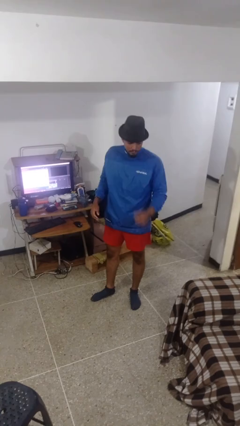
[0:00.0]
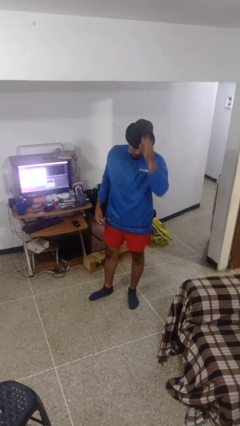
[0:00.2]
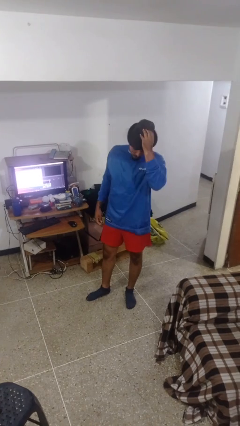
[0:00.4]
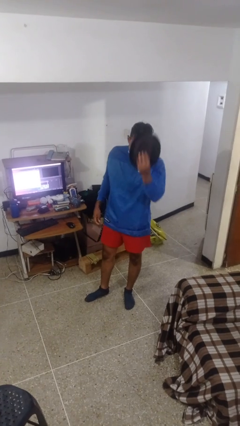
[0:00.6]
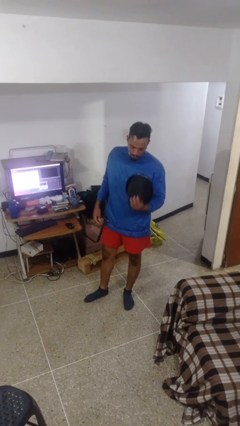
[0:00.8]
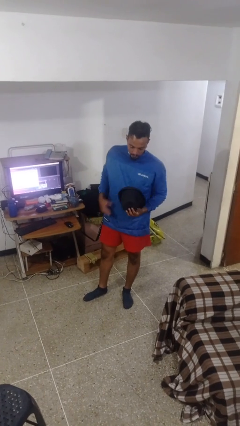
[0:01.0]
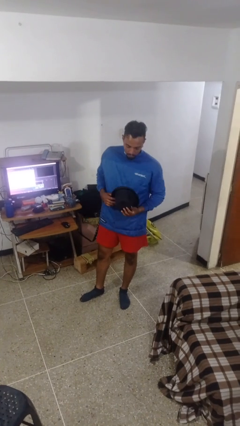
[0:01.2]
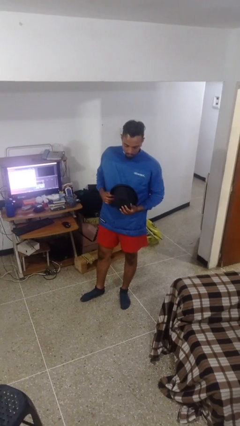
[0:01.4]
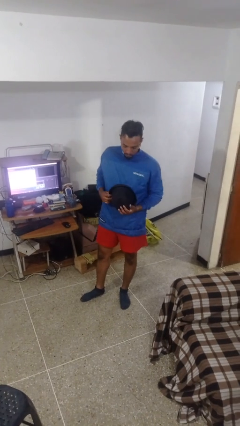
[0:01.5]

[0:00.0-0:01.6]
person takes off hat

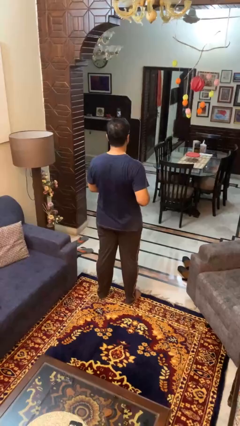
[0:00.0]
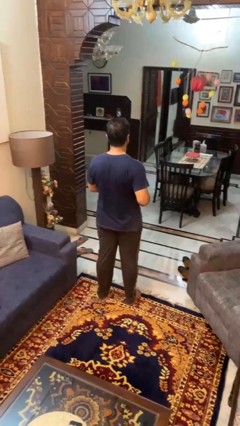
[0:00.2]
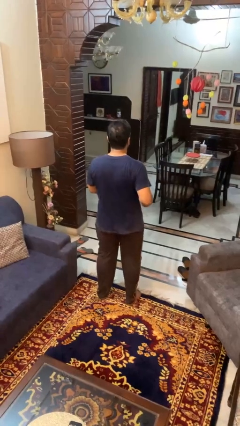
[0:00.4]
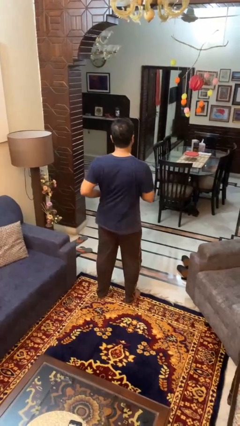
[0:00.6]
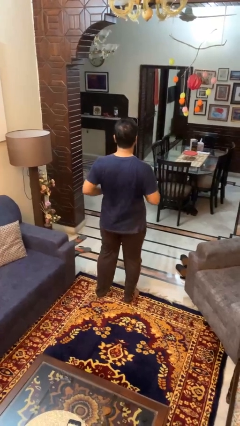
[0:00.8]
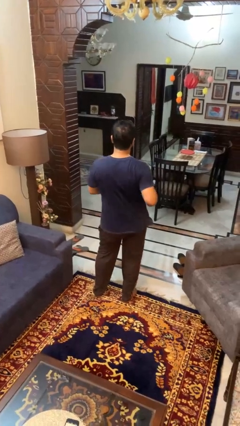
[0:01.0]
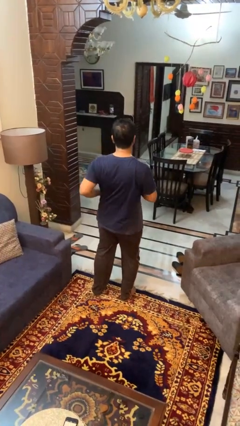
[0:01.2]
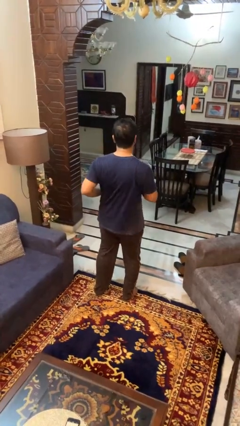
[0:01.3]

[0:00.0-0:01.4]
person wiggles hips

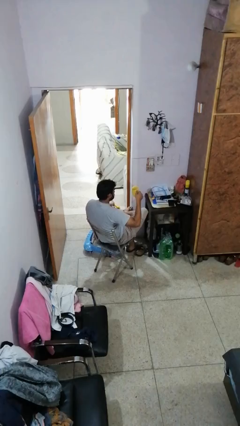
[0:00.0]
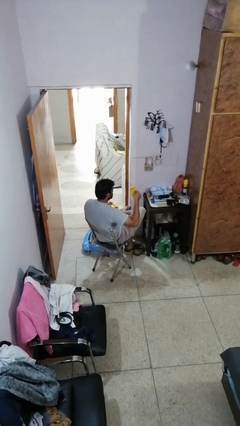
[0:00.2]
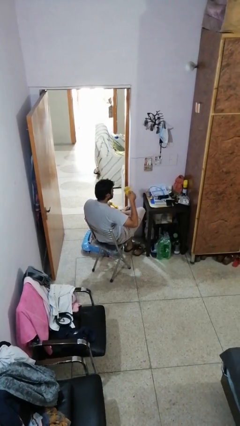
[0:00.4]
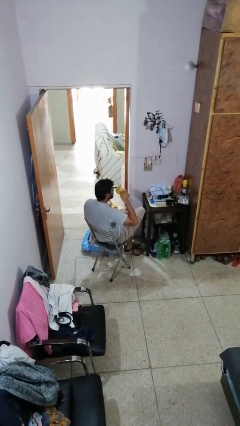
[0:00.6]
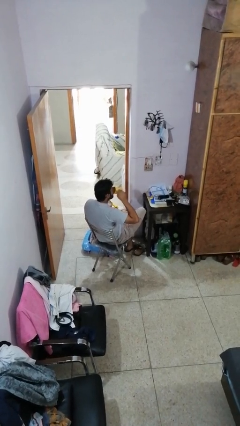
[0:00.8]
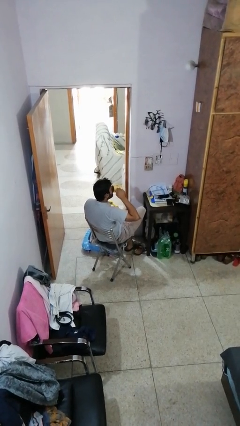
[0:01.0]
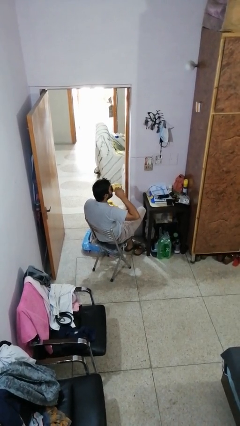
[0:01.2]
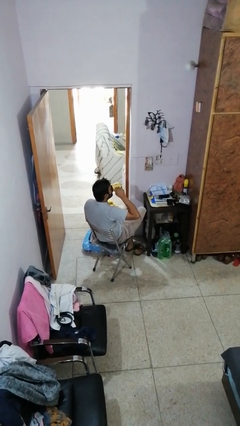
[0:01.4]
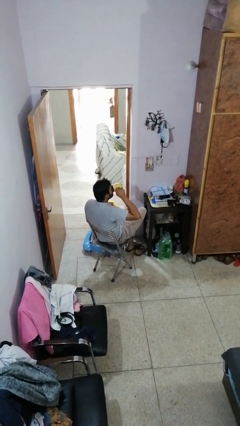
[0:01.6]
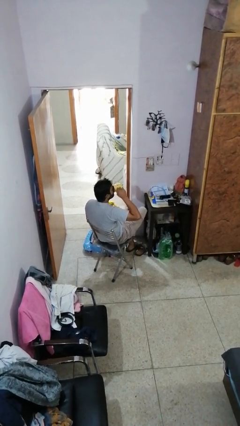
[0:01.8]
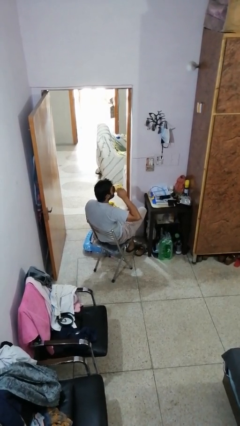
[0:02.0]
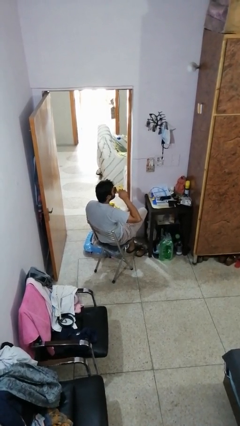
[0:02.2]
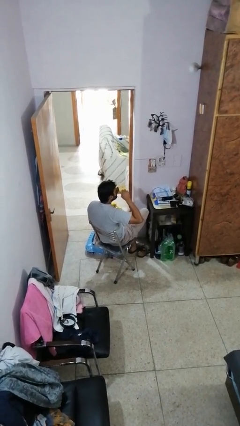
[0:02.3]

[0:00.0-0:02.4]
person drinks from mug

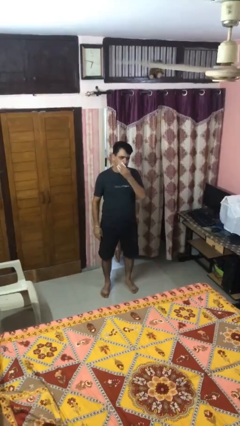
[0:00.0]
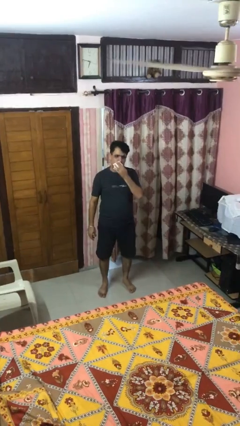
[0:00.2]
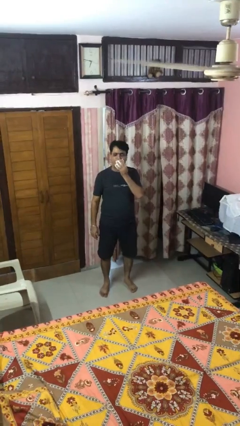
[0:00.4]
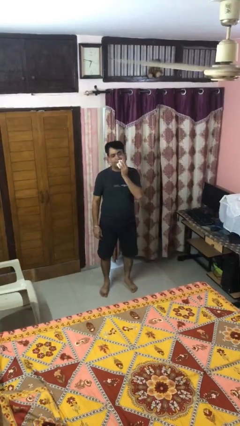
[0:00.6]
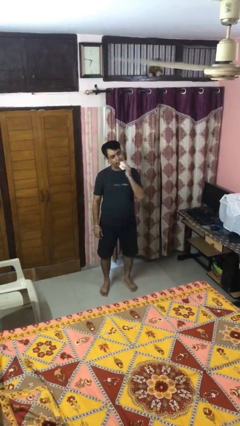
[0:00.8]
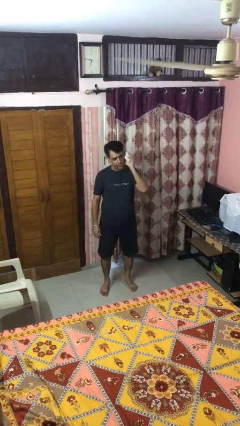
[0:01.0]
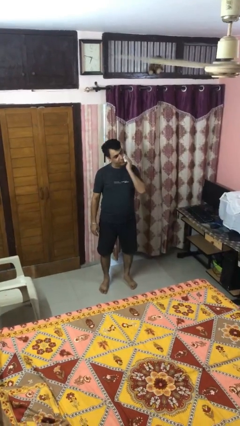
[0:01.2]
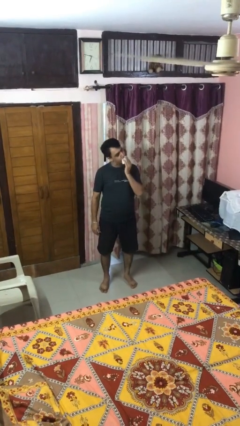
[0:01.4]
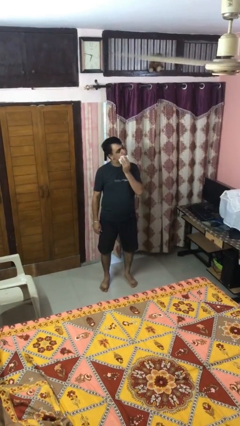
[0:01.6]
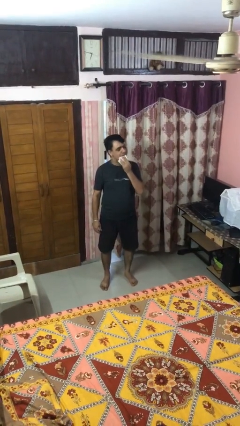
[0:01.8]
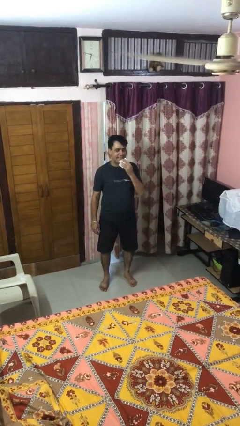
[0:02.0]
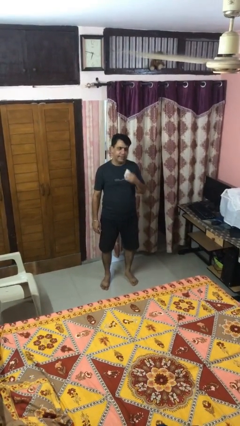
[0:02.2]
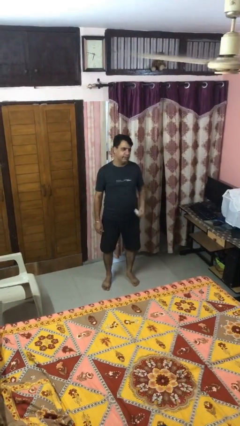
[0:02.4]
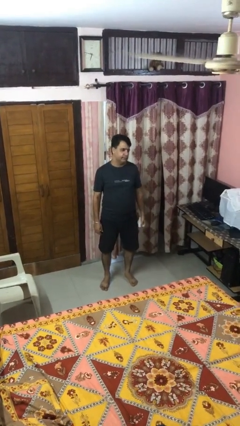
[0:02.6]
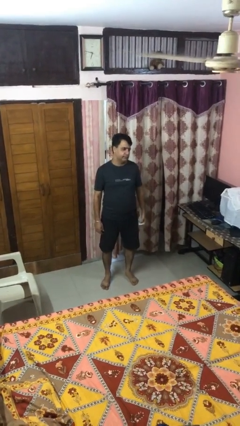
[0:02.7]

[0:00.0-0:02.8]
person wipes mouth with napkin

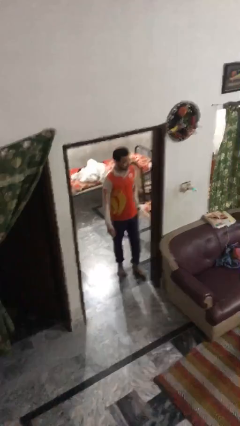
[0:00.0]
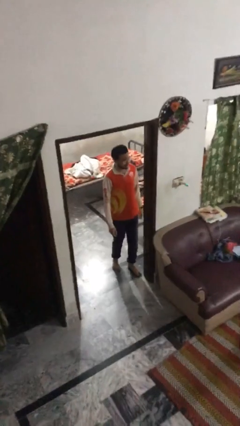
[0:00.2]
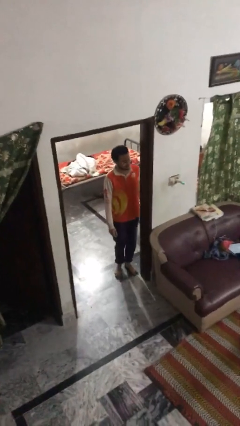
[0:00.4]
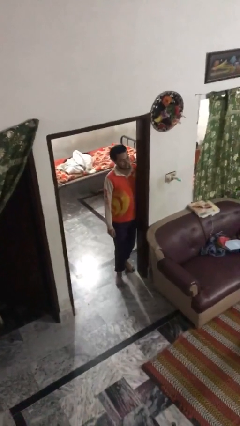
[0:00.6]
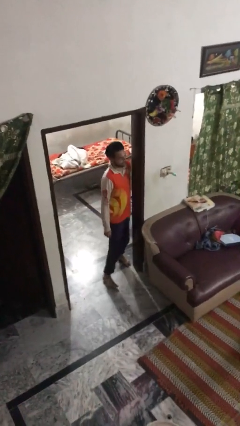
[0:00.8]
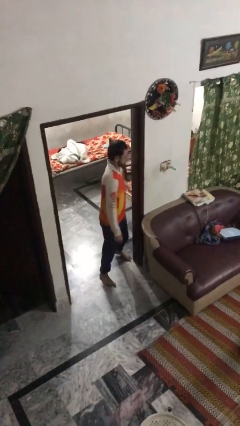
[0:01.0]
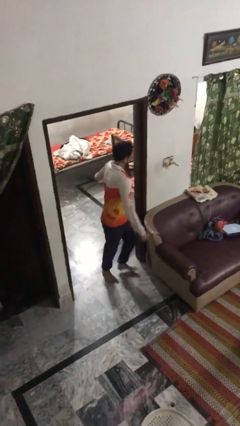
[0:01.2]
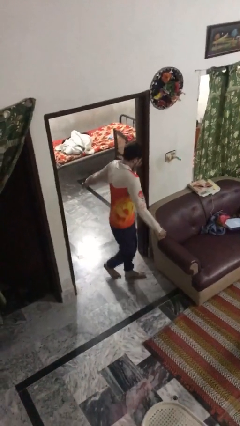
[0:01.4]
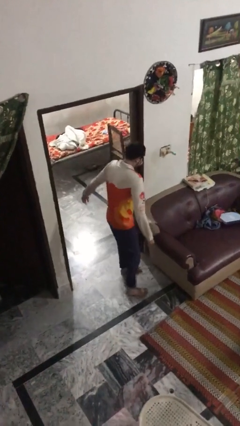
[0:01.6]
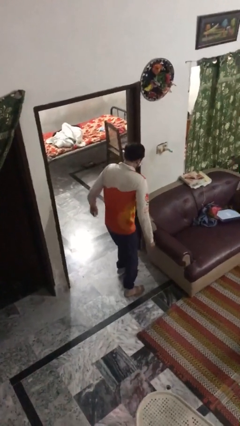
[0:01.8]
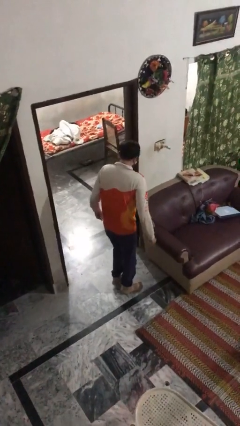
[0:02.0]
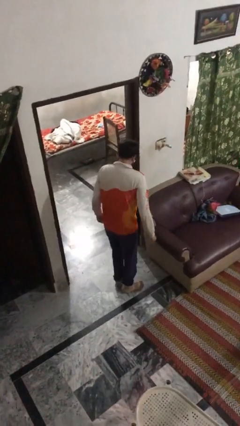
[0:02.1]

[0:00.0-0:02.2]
person bumps into wall

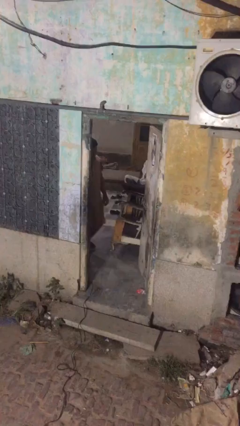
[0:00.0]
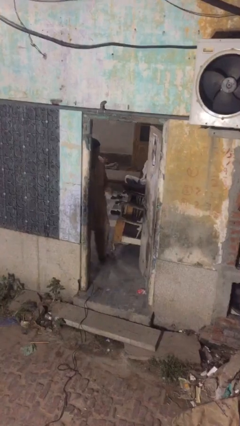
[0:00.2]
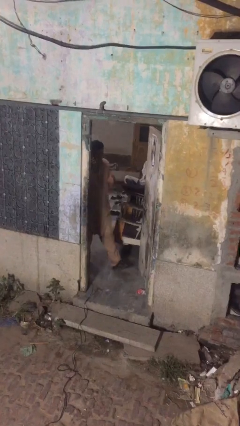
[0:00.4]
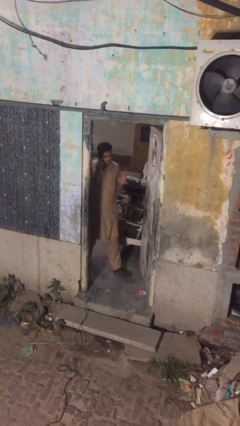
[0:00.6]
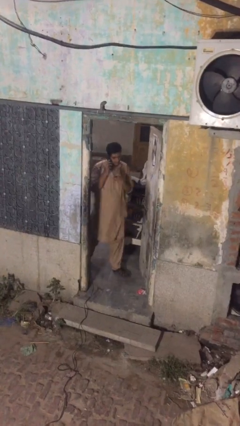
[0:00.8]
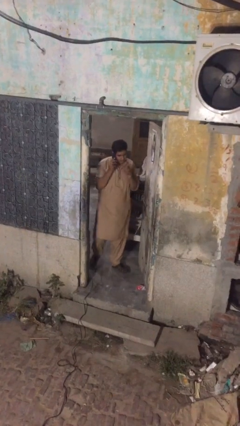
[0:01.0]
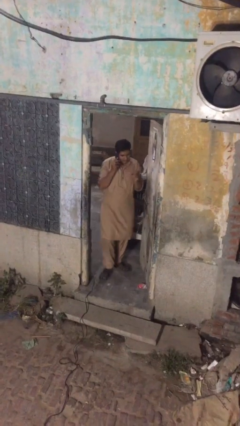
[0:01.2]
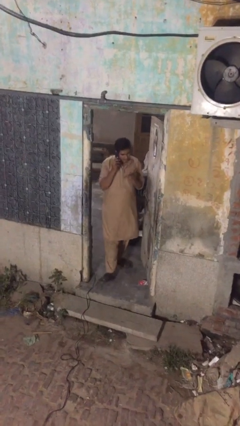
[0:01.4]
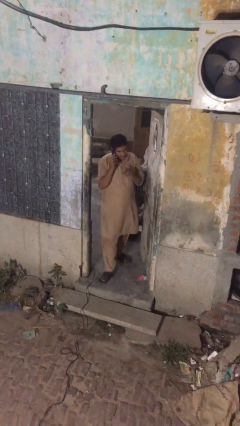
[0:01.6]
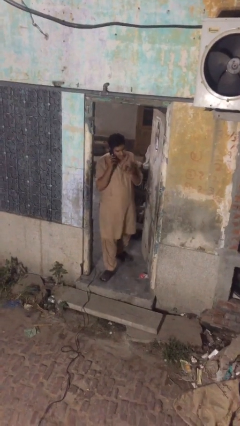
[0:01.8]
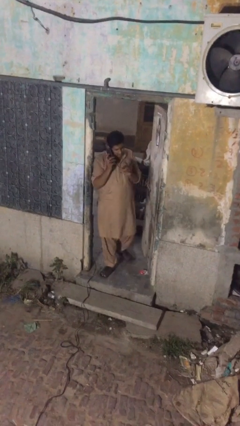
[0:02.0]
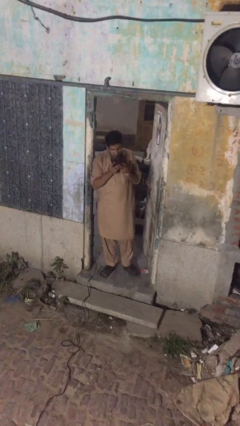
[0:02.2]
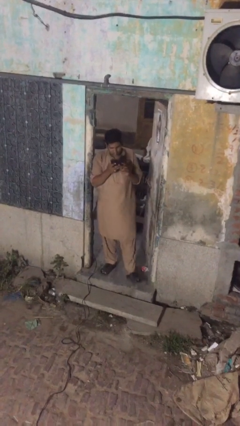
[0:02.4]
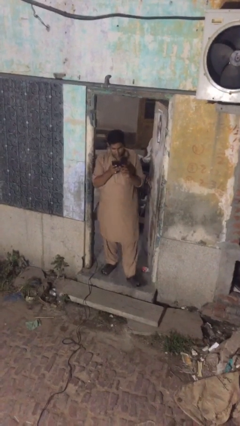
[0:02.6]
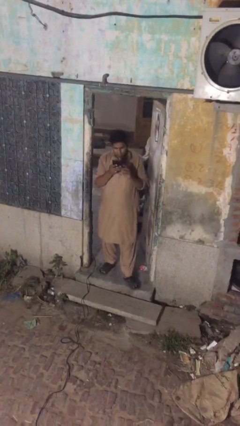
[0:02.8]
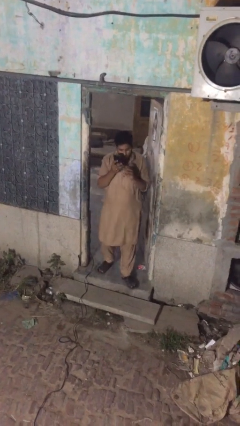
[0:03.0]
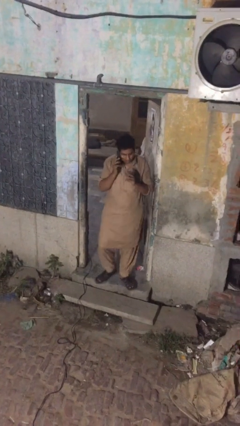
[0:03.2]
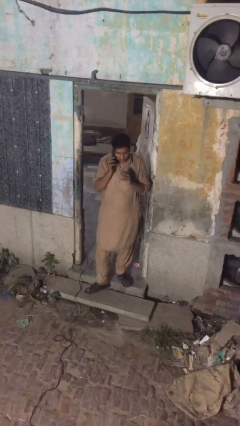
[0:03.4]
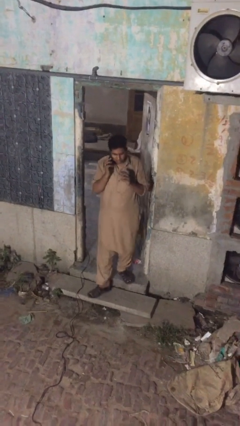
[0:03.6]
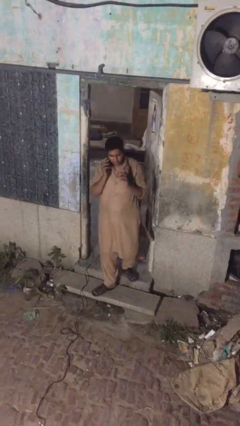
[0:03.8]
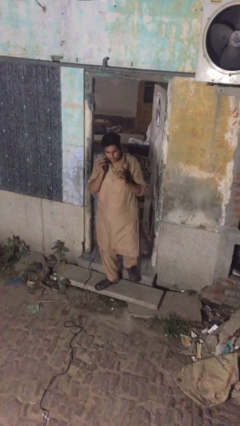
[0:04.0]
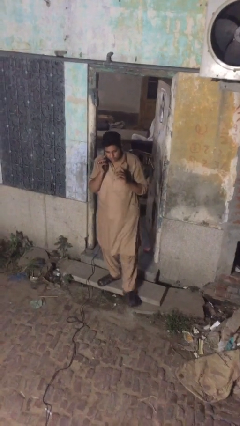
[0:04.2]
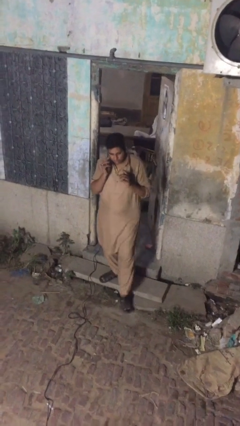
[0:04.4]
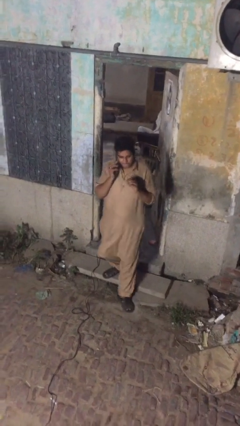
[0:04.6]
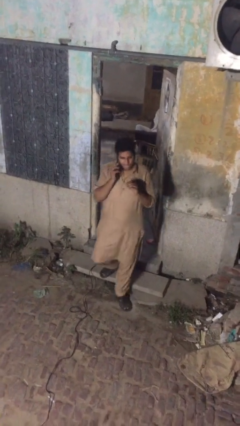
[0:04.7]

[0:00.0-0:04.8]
person enters scene through structure

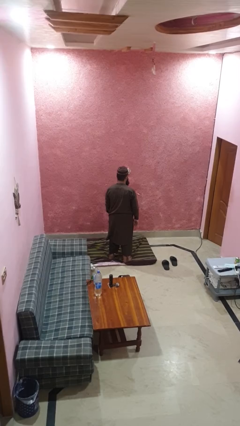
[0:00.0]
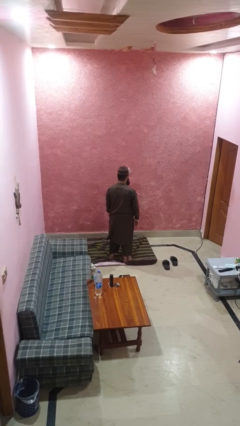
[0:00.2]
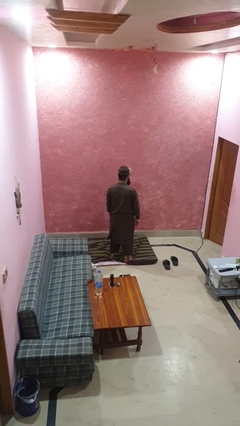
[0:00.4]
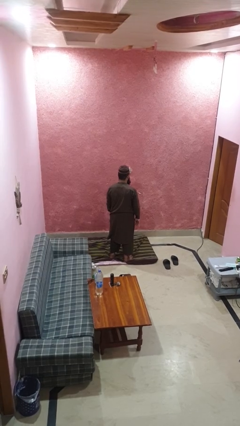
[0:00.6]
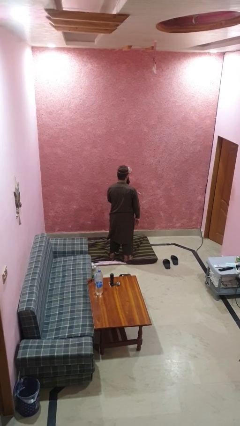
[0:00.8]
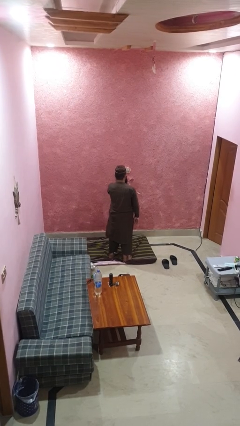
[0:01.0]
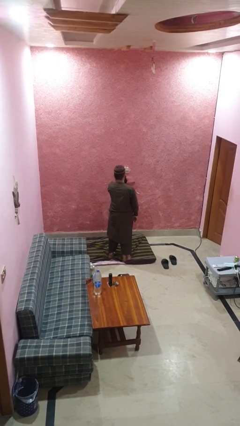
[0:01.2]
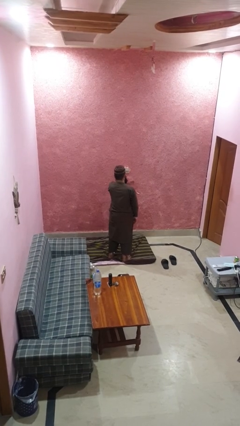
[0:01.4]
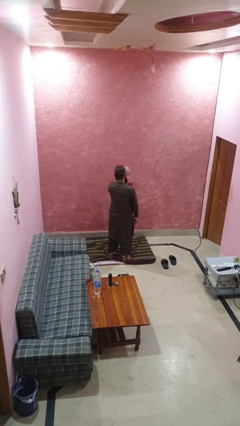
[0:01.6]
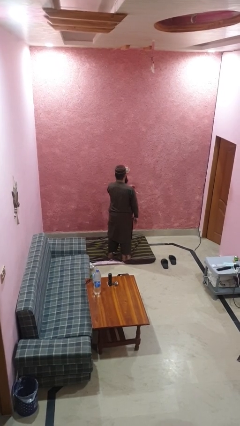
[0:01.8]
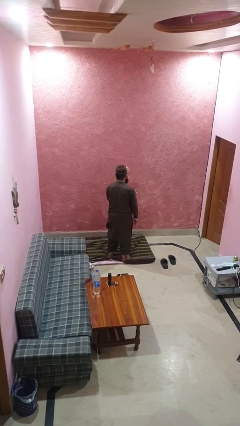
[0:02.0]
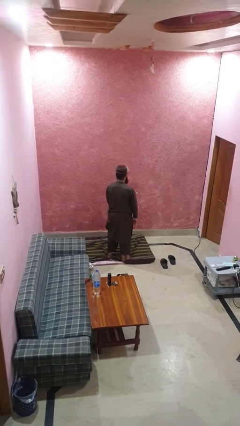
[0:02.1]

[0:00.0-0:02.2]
person drums on chest
